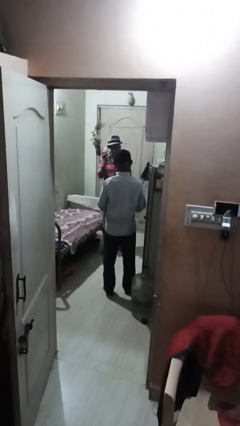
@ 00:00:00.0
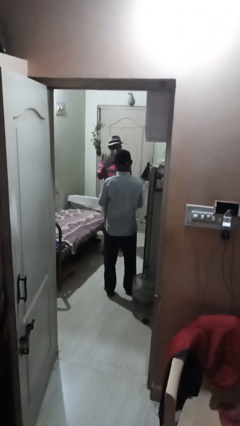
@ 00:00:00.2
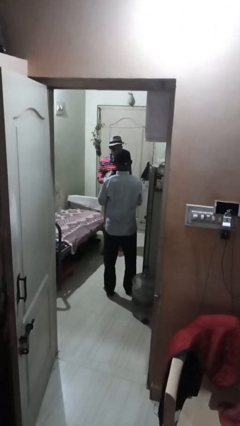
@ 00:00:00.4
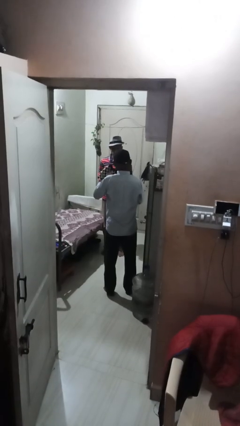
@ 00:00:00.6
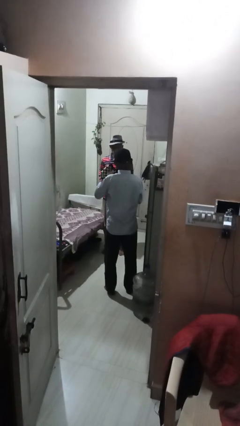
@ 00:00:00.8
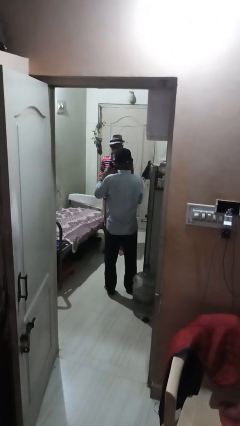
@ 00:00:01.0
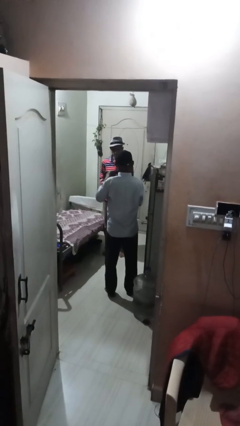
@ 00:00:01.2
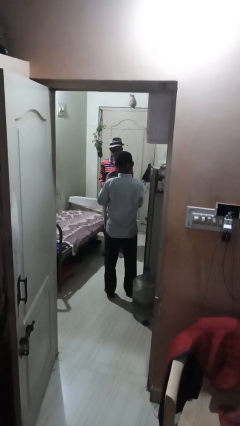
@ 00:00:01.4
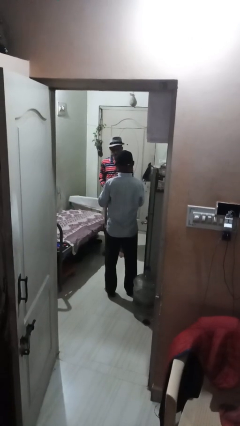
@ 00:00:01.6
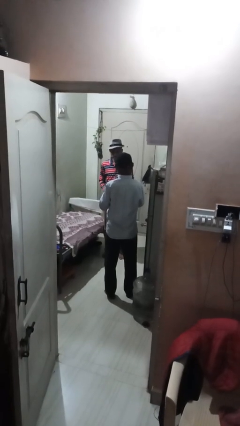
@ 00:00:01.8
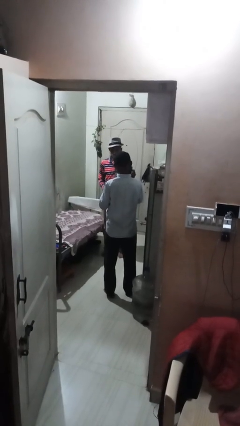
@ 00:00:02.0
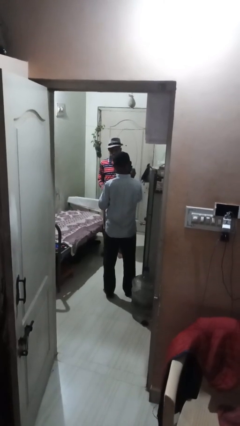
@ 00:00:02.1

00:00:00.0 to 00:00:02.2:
person catches object from person

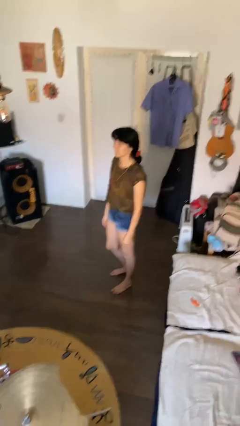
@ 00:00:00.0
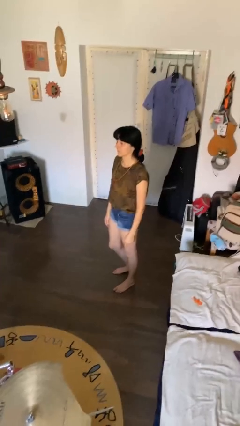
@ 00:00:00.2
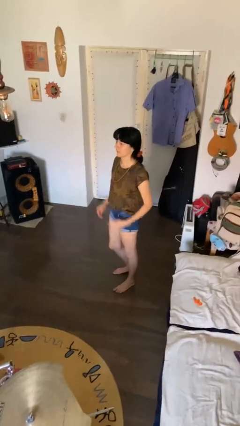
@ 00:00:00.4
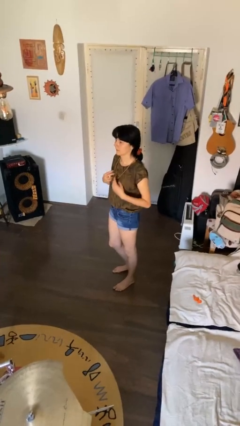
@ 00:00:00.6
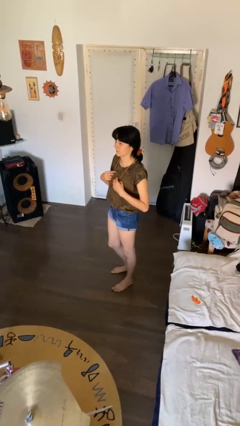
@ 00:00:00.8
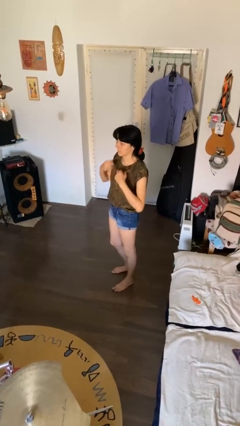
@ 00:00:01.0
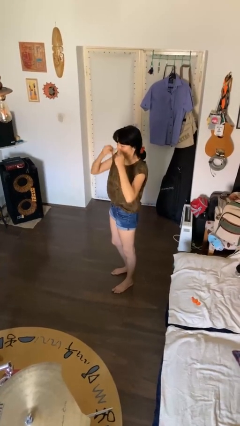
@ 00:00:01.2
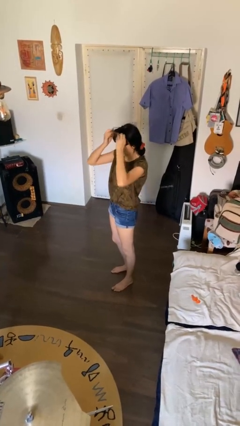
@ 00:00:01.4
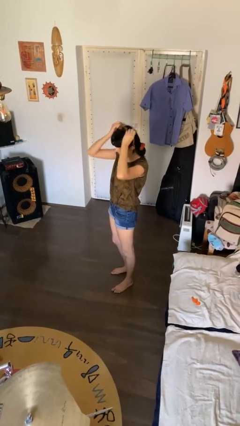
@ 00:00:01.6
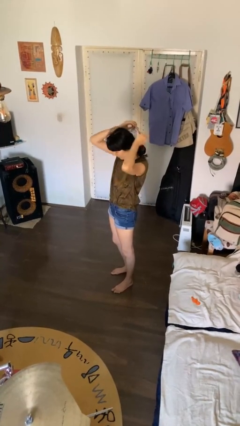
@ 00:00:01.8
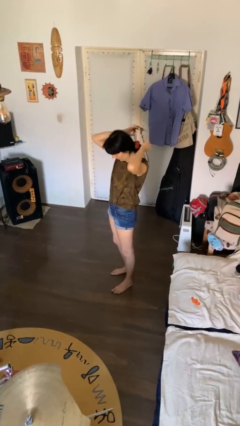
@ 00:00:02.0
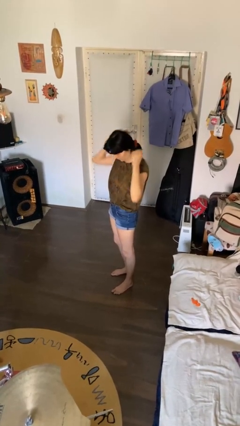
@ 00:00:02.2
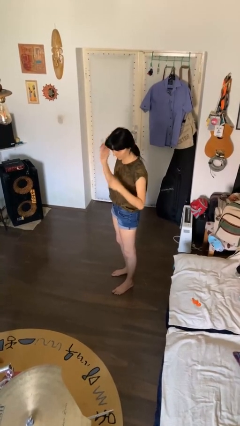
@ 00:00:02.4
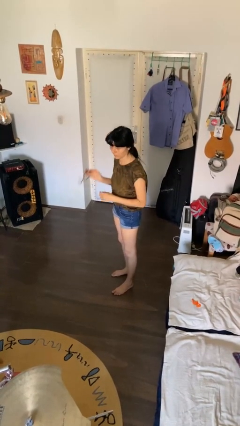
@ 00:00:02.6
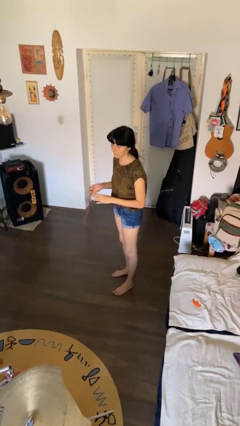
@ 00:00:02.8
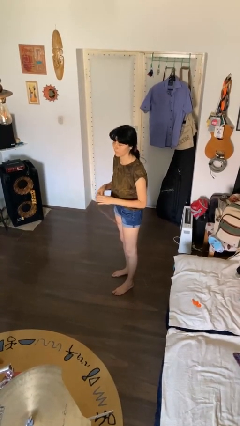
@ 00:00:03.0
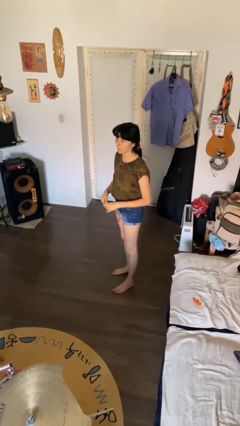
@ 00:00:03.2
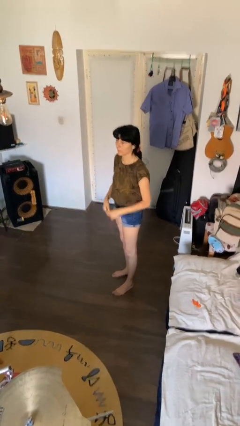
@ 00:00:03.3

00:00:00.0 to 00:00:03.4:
person takes off necklace

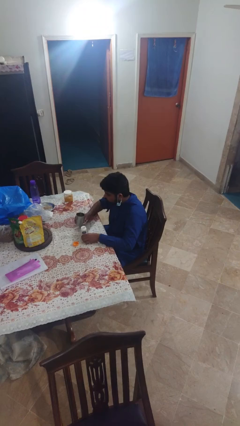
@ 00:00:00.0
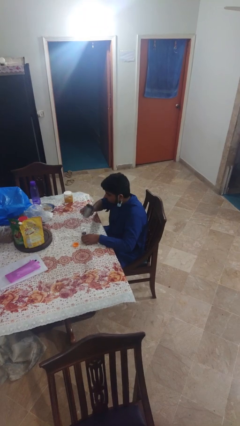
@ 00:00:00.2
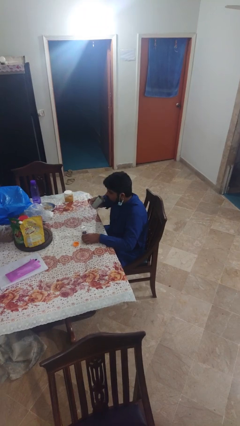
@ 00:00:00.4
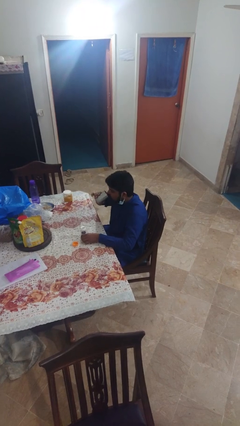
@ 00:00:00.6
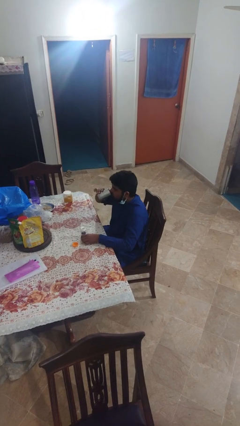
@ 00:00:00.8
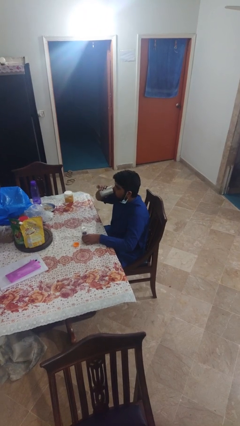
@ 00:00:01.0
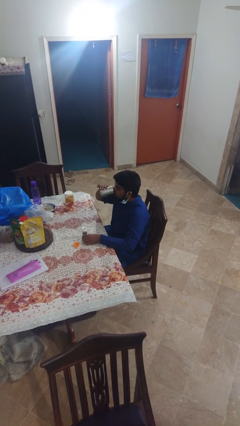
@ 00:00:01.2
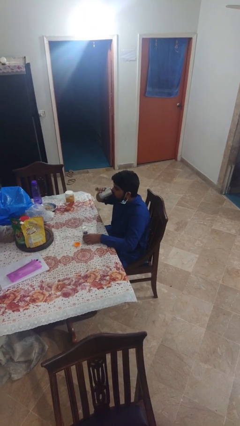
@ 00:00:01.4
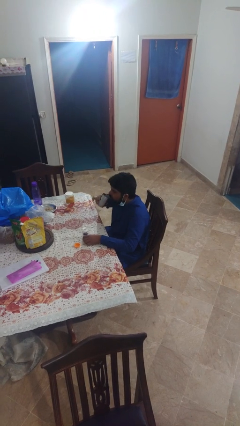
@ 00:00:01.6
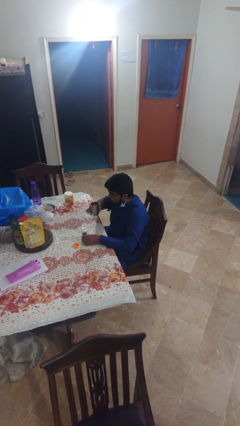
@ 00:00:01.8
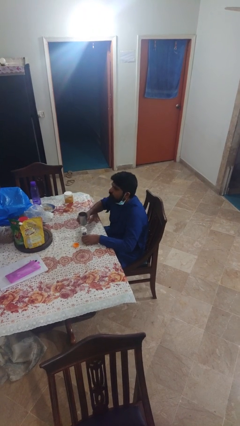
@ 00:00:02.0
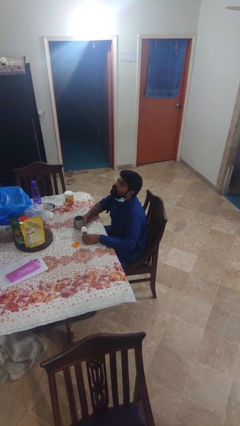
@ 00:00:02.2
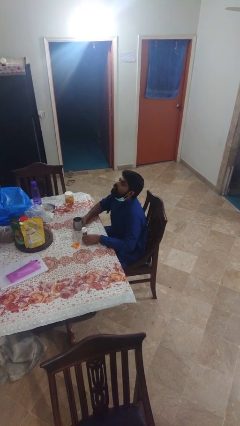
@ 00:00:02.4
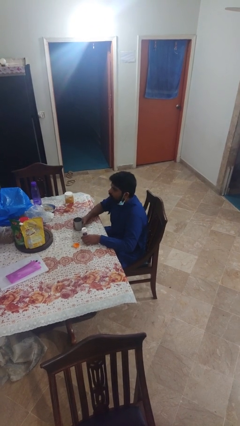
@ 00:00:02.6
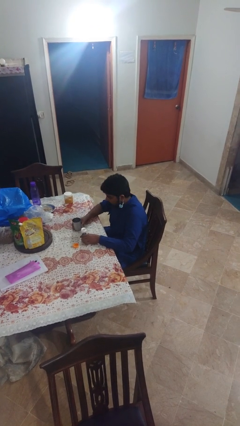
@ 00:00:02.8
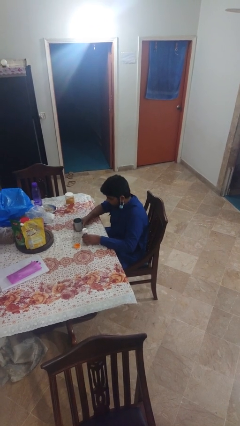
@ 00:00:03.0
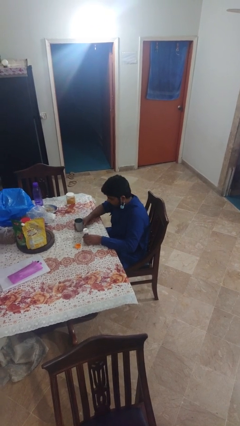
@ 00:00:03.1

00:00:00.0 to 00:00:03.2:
person drinks from cup

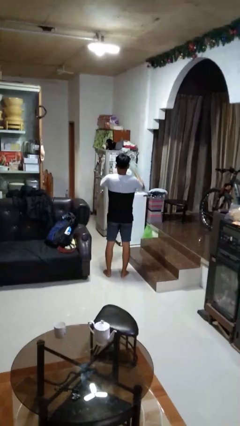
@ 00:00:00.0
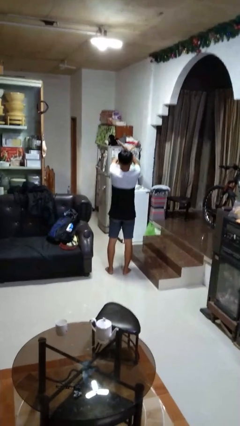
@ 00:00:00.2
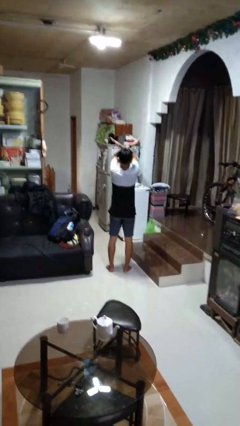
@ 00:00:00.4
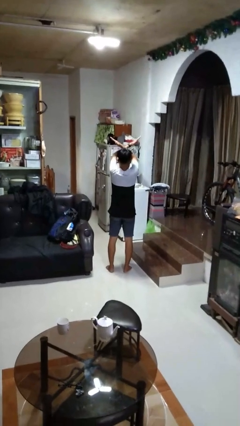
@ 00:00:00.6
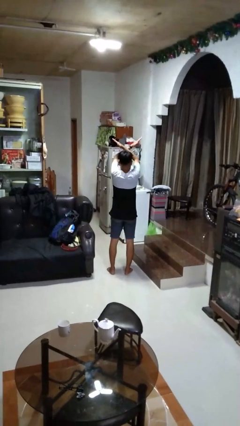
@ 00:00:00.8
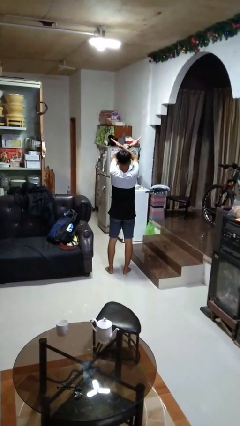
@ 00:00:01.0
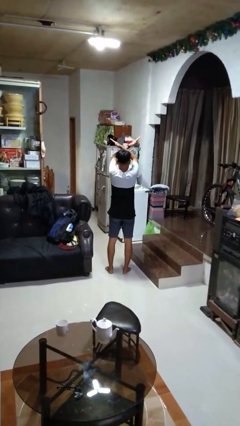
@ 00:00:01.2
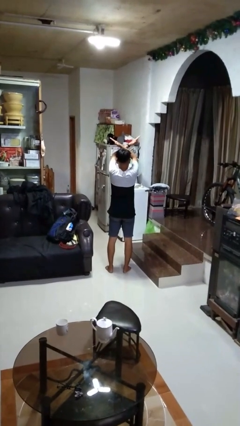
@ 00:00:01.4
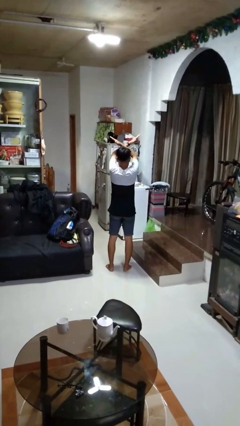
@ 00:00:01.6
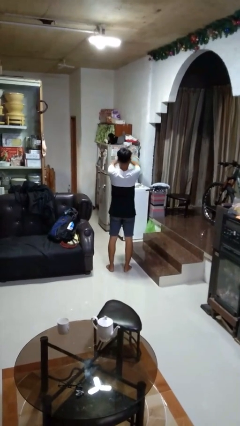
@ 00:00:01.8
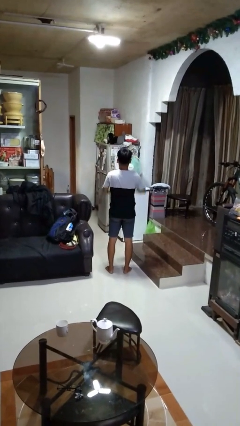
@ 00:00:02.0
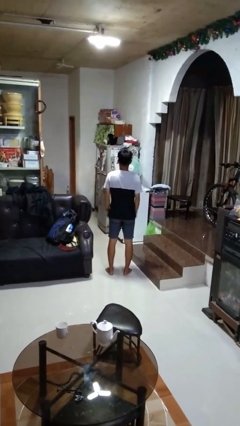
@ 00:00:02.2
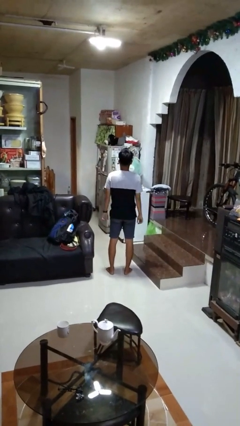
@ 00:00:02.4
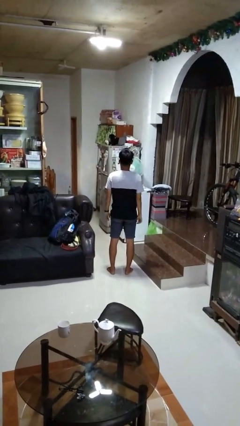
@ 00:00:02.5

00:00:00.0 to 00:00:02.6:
person gestures arms x

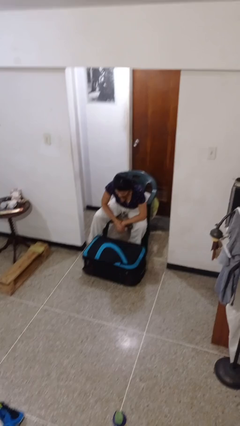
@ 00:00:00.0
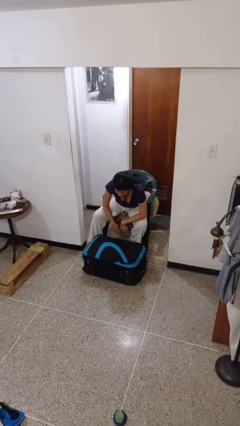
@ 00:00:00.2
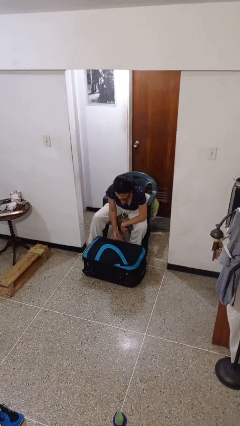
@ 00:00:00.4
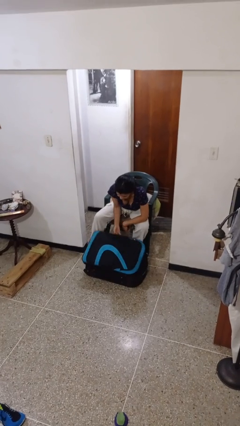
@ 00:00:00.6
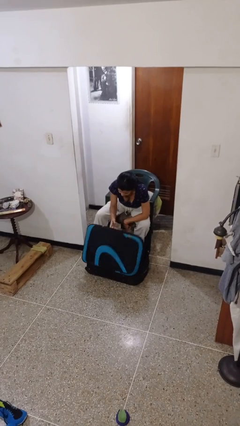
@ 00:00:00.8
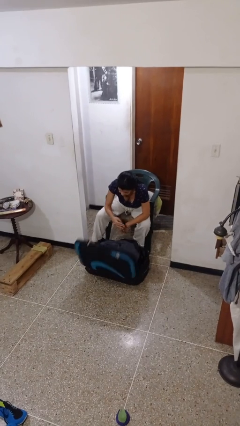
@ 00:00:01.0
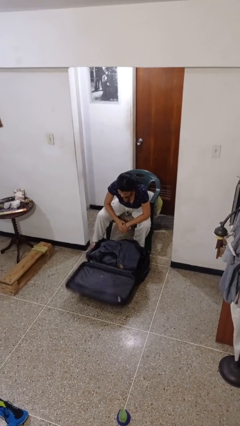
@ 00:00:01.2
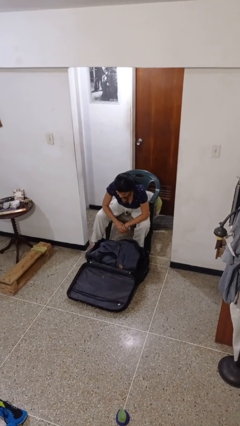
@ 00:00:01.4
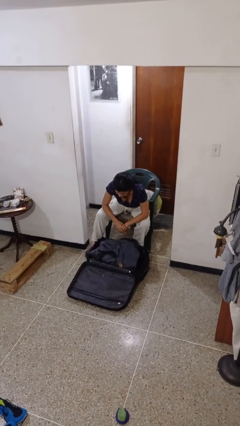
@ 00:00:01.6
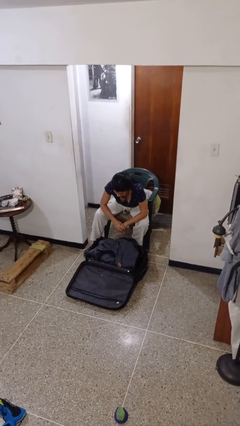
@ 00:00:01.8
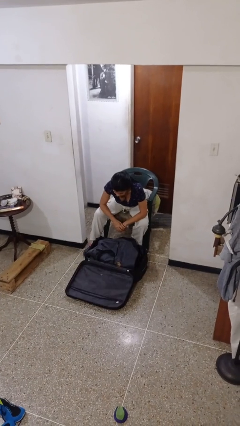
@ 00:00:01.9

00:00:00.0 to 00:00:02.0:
person opens suitcase

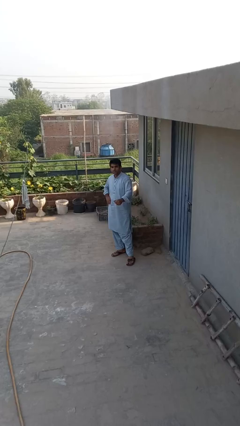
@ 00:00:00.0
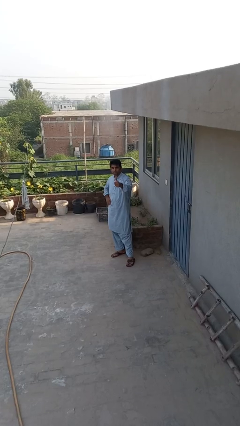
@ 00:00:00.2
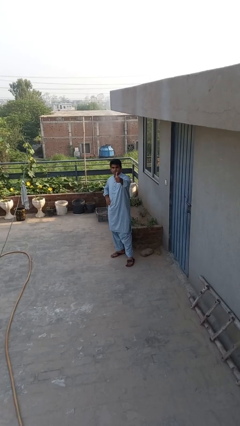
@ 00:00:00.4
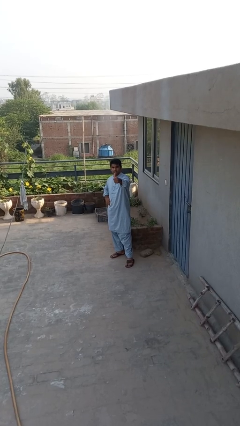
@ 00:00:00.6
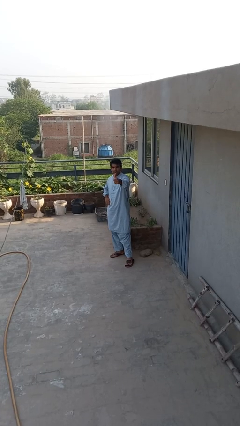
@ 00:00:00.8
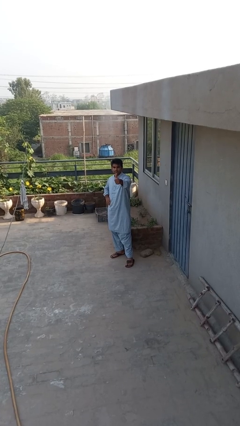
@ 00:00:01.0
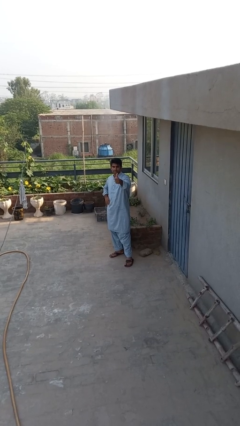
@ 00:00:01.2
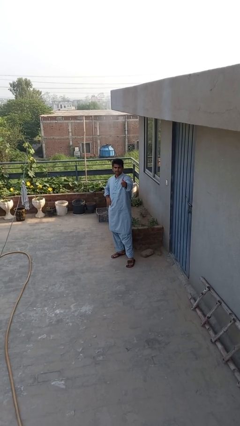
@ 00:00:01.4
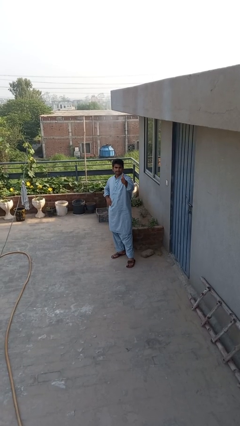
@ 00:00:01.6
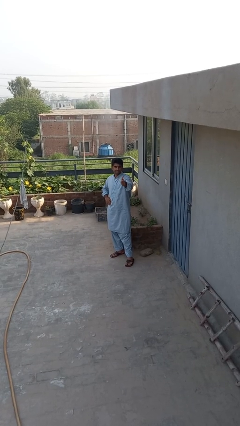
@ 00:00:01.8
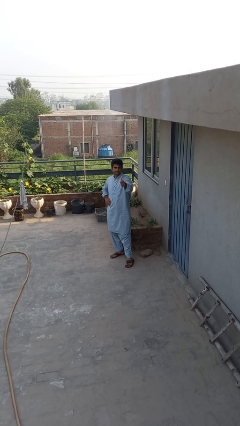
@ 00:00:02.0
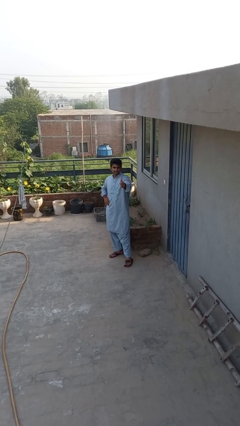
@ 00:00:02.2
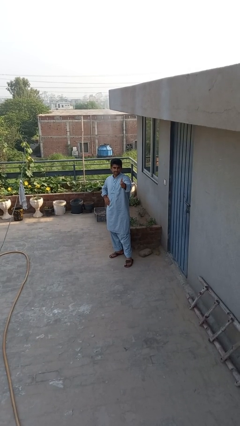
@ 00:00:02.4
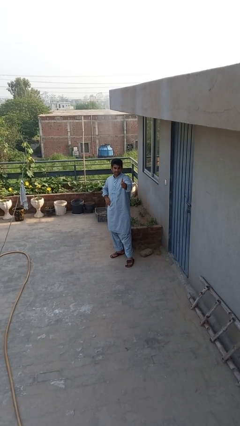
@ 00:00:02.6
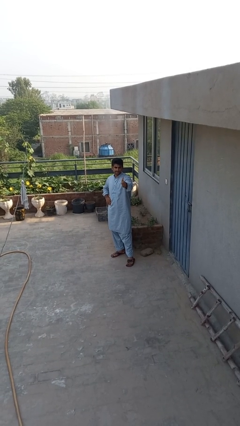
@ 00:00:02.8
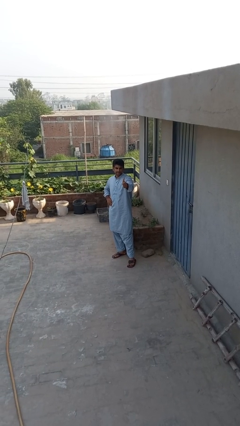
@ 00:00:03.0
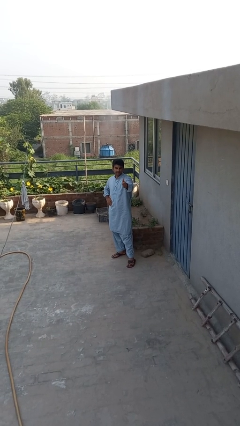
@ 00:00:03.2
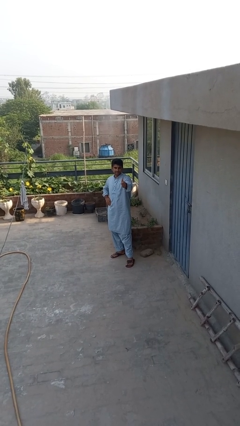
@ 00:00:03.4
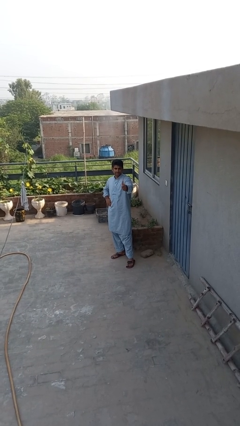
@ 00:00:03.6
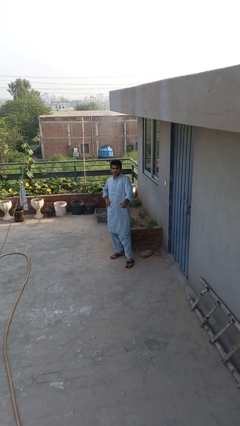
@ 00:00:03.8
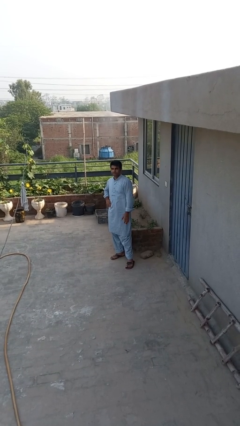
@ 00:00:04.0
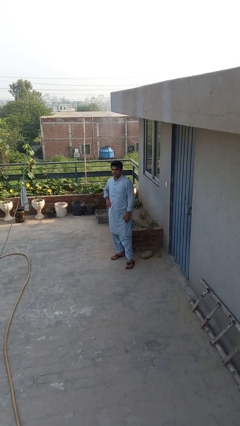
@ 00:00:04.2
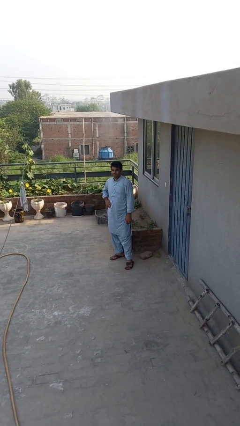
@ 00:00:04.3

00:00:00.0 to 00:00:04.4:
person gestures thumbs up
